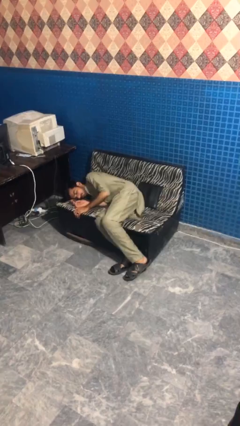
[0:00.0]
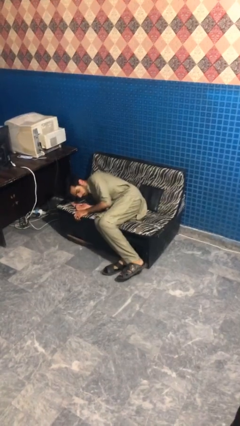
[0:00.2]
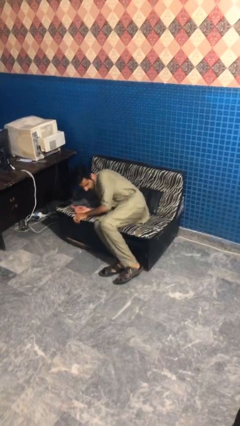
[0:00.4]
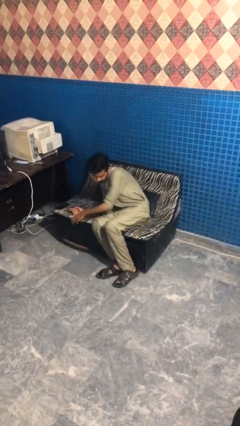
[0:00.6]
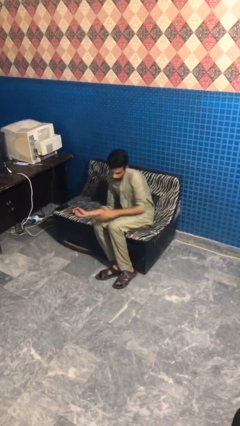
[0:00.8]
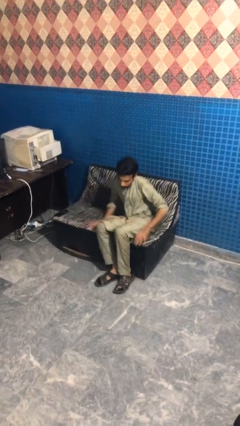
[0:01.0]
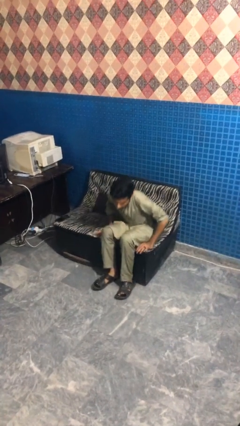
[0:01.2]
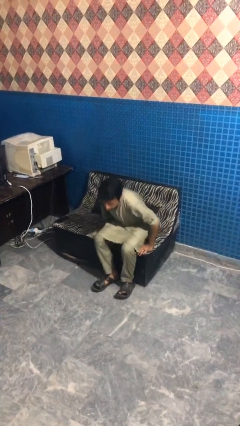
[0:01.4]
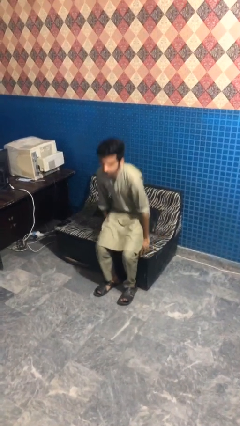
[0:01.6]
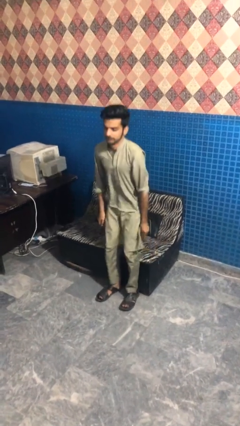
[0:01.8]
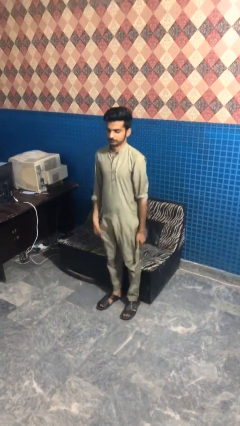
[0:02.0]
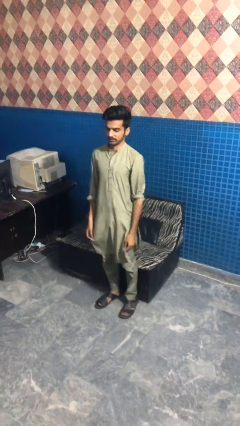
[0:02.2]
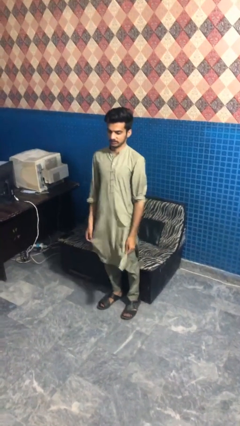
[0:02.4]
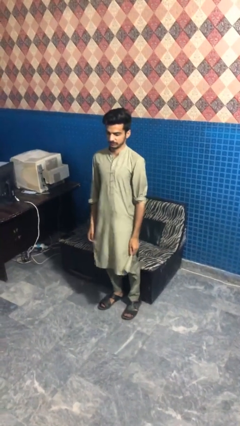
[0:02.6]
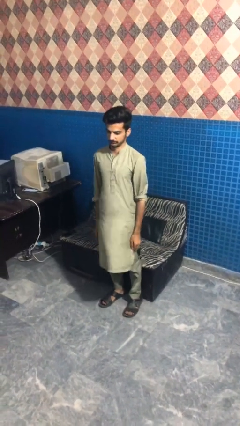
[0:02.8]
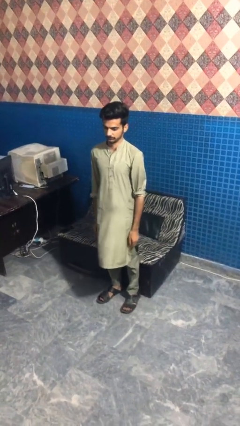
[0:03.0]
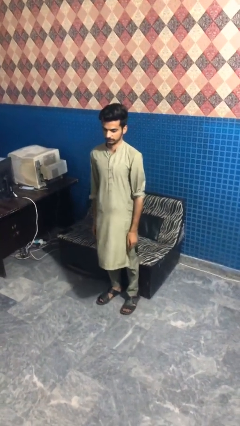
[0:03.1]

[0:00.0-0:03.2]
person stands up

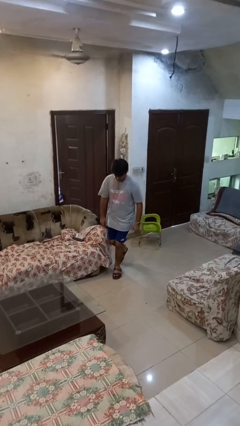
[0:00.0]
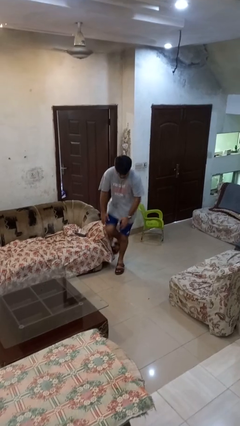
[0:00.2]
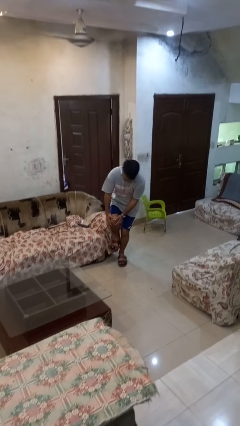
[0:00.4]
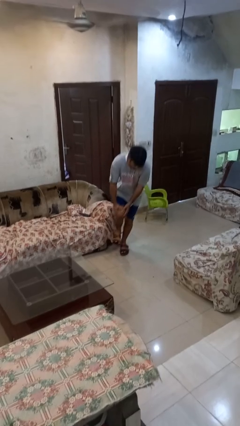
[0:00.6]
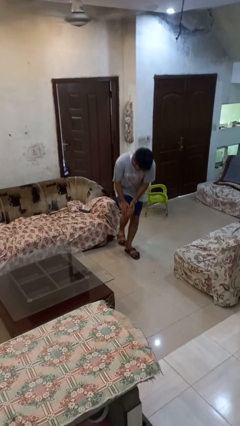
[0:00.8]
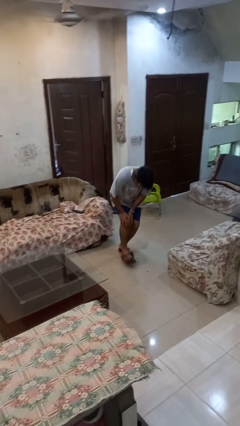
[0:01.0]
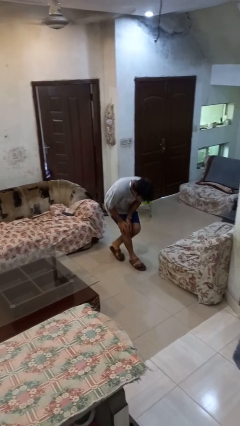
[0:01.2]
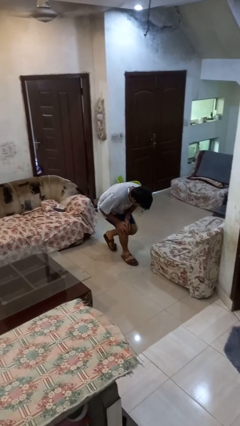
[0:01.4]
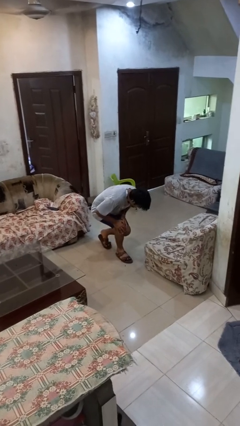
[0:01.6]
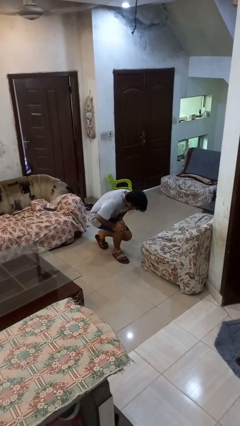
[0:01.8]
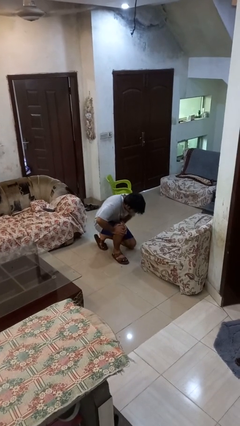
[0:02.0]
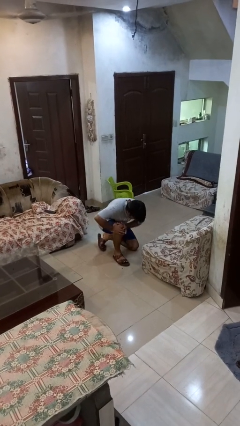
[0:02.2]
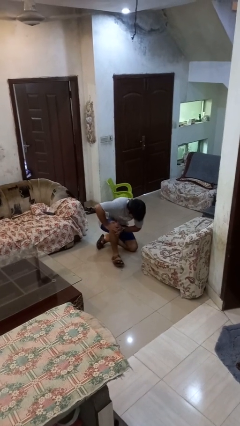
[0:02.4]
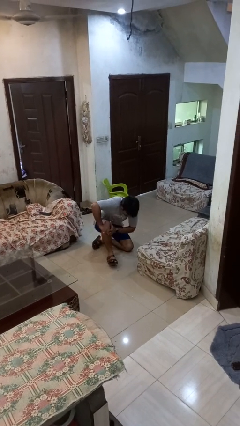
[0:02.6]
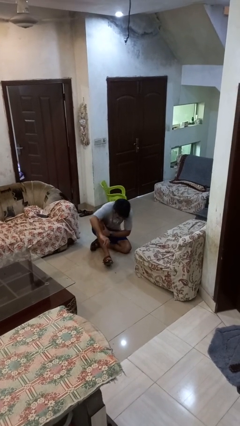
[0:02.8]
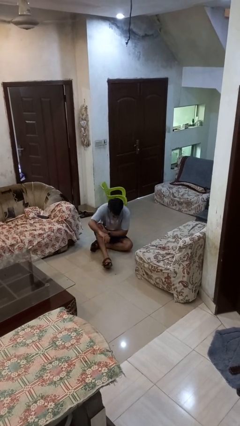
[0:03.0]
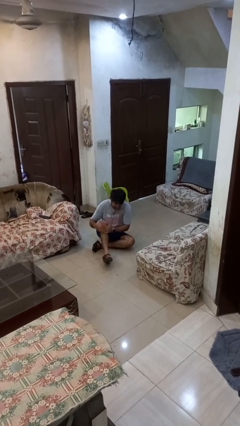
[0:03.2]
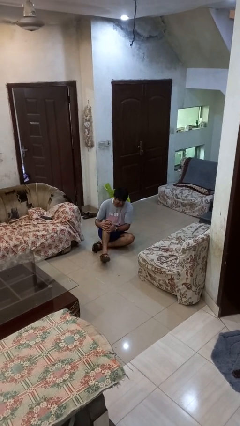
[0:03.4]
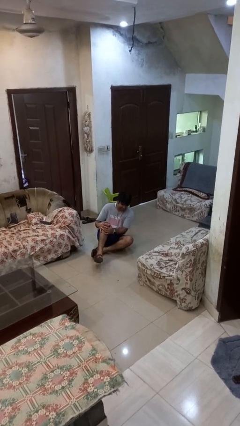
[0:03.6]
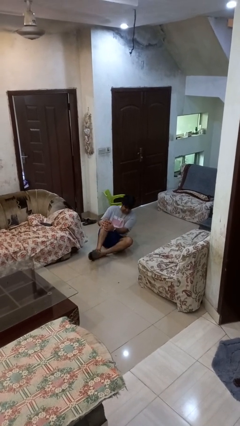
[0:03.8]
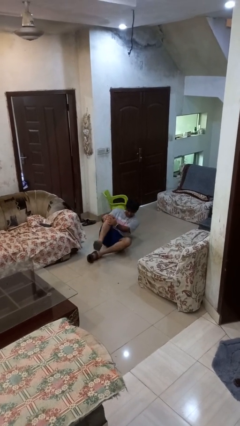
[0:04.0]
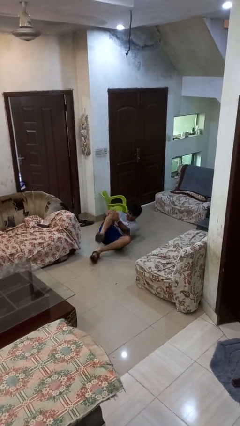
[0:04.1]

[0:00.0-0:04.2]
person trips on object on floor

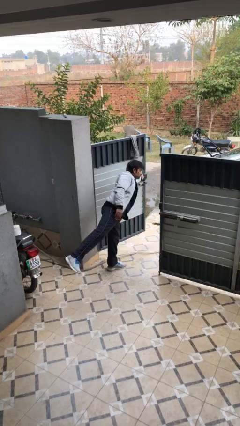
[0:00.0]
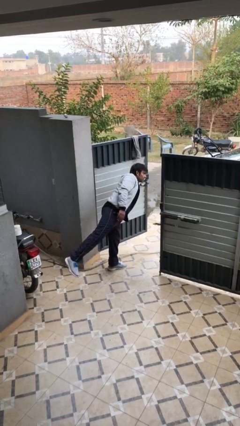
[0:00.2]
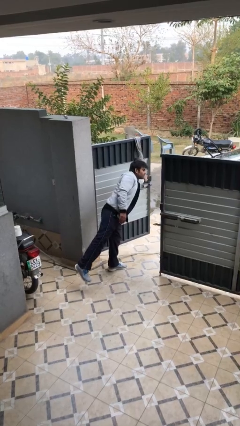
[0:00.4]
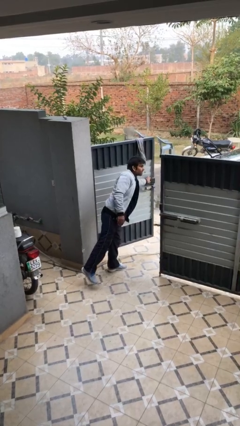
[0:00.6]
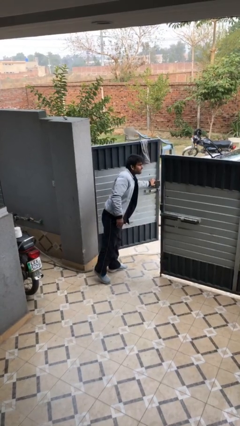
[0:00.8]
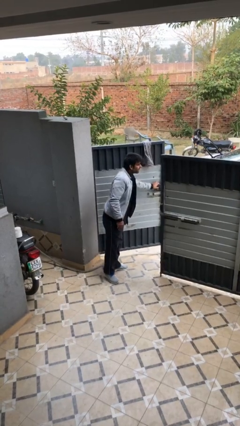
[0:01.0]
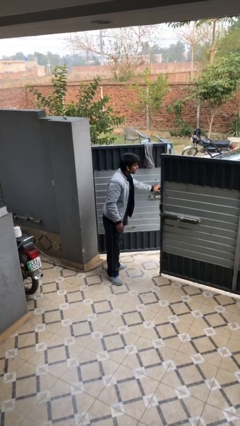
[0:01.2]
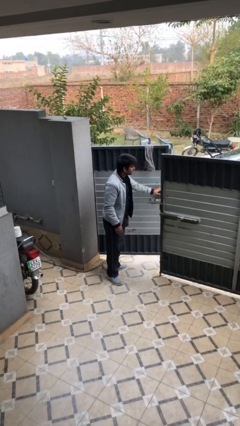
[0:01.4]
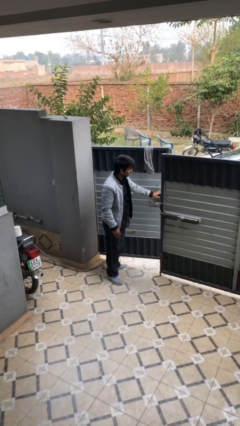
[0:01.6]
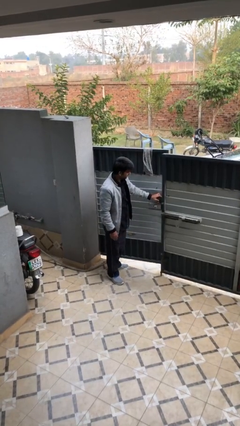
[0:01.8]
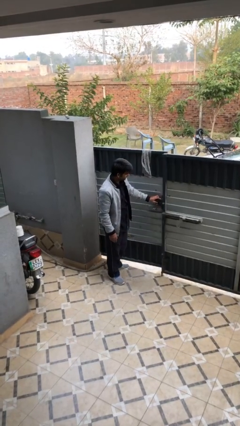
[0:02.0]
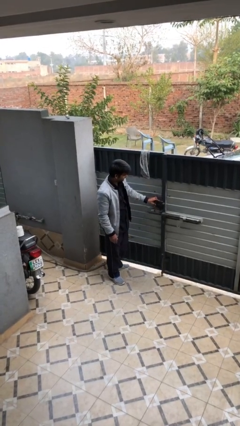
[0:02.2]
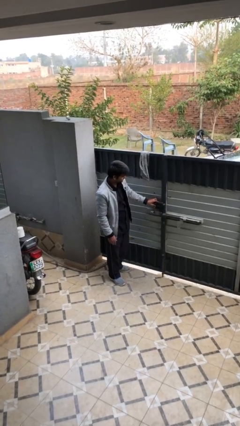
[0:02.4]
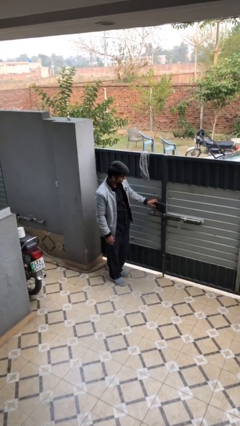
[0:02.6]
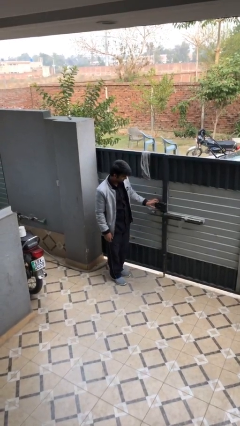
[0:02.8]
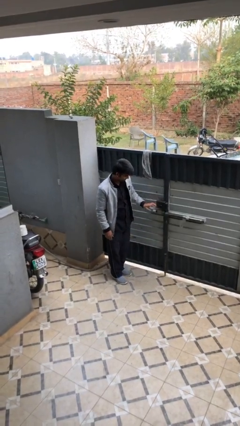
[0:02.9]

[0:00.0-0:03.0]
person closes facility door

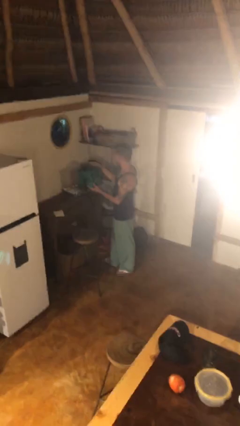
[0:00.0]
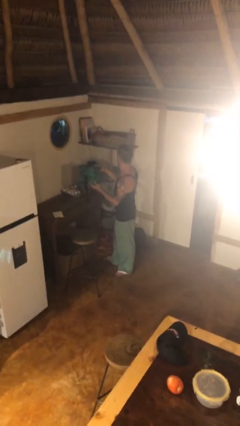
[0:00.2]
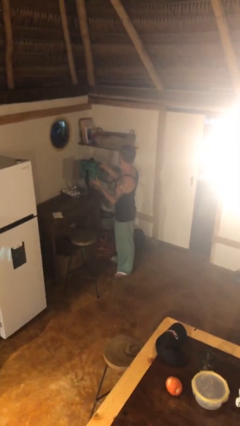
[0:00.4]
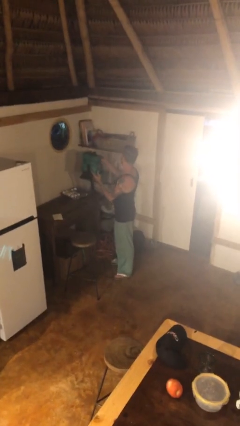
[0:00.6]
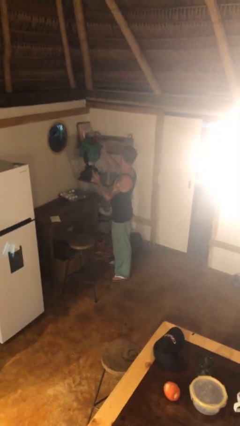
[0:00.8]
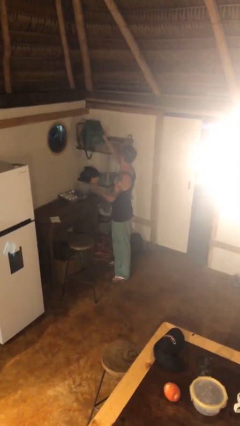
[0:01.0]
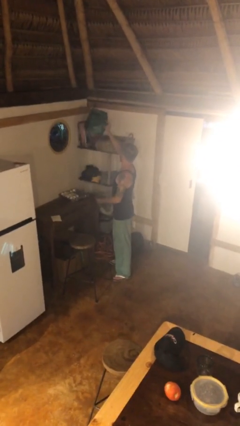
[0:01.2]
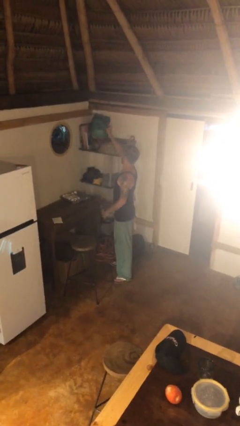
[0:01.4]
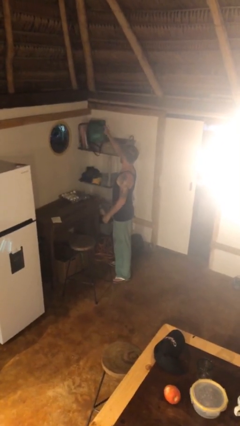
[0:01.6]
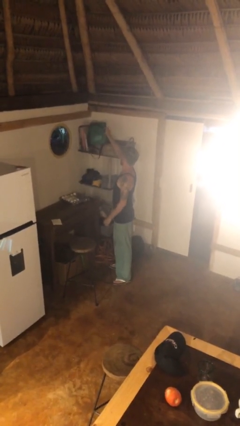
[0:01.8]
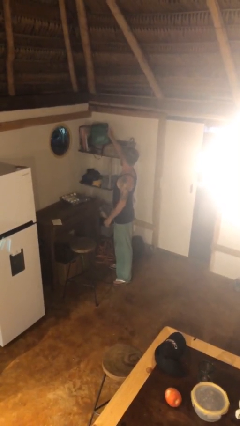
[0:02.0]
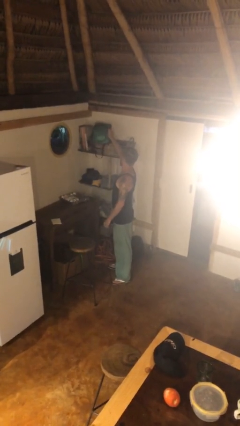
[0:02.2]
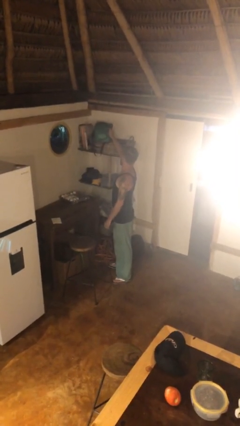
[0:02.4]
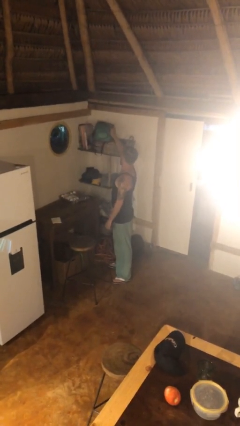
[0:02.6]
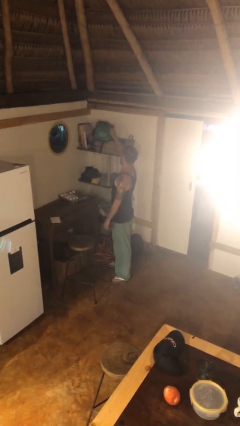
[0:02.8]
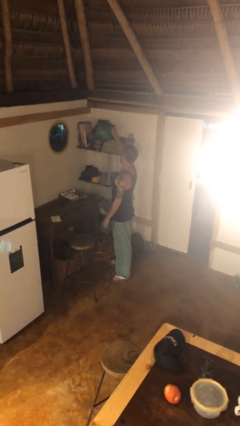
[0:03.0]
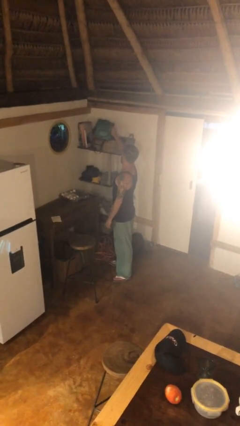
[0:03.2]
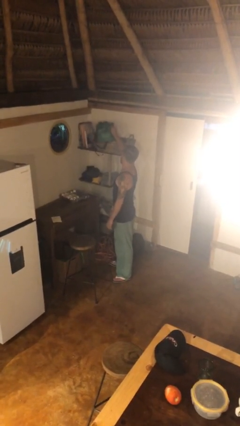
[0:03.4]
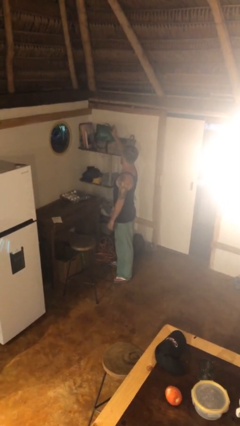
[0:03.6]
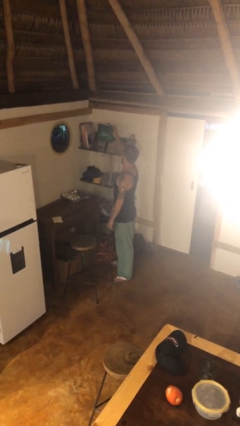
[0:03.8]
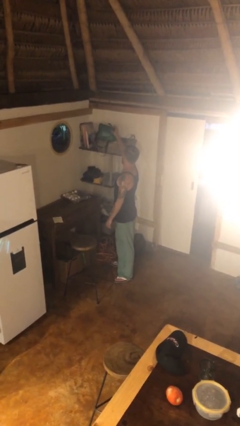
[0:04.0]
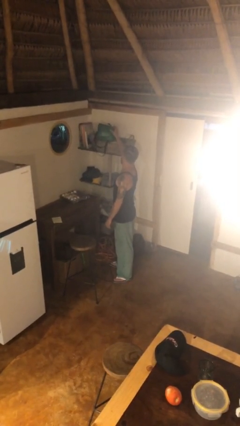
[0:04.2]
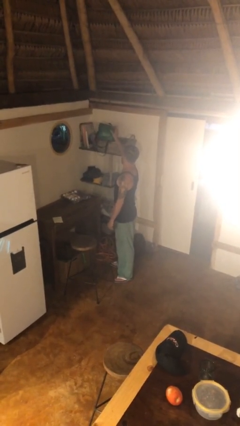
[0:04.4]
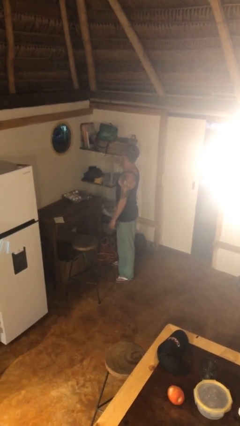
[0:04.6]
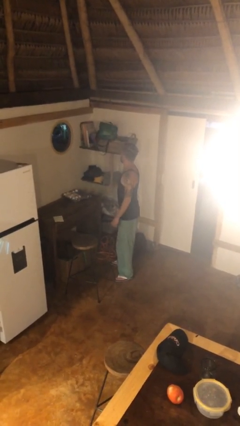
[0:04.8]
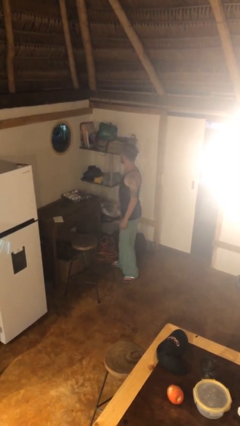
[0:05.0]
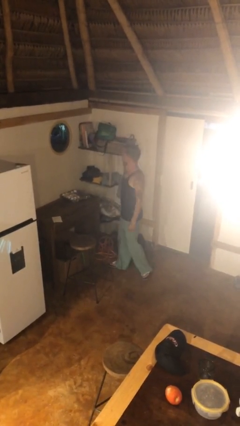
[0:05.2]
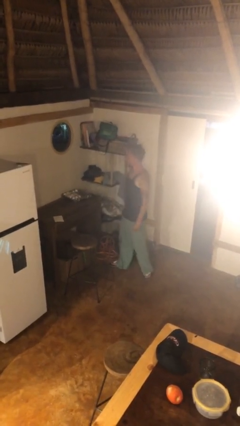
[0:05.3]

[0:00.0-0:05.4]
person puts down object on shelf

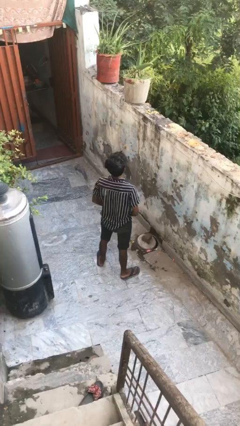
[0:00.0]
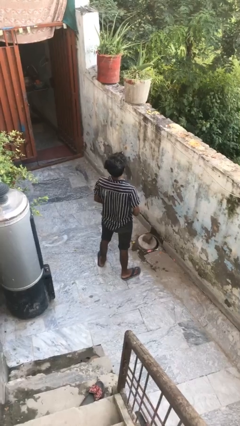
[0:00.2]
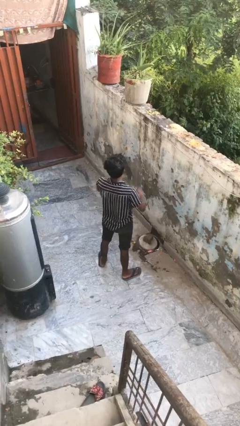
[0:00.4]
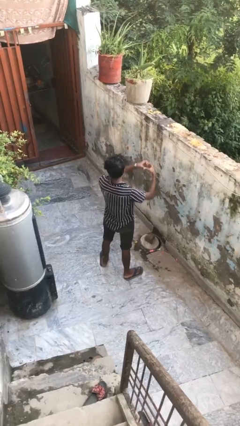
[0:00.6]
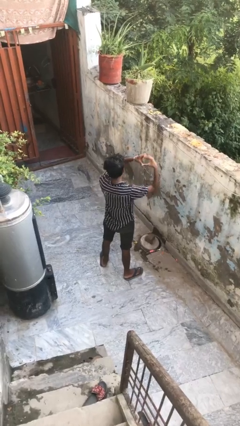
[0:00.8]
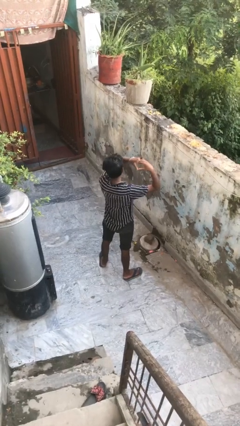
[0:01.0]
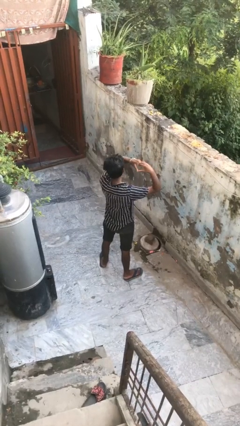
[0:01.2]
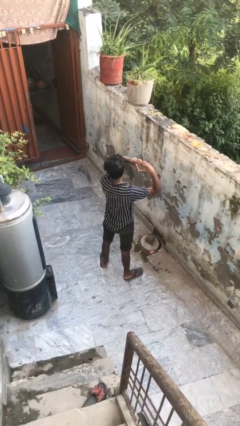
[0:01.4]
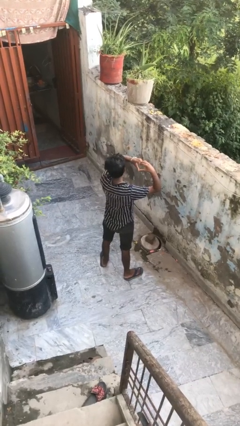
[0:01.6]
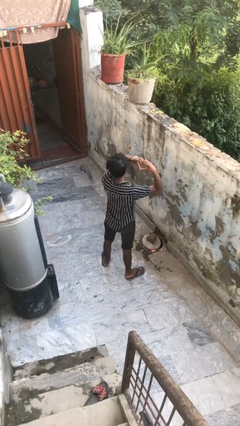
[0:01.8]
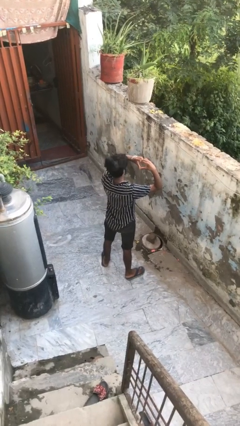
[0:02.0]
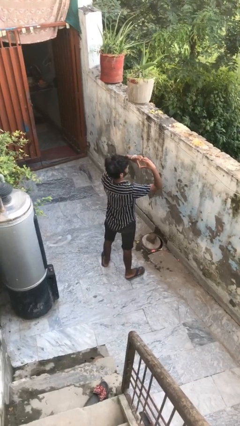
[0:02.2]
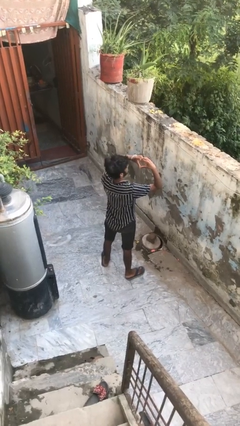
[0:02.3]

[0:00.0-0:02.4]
person gestures heart
